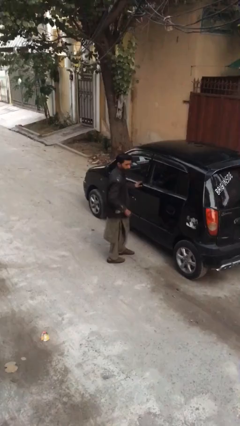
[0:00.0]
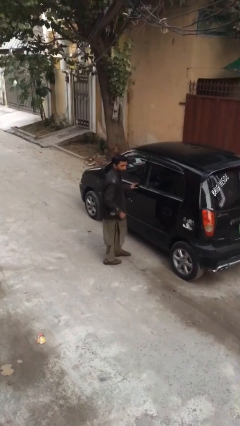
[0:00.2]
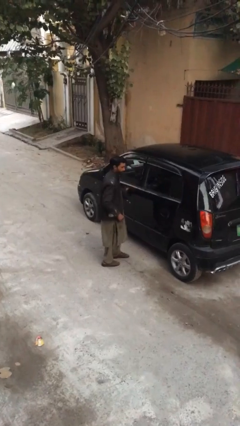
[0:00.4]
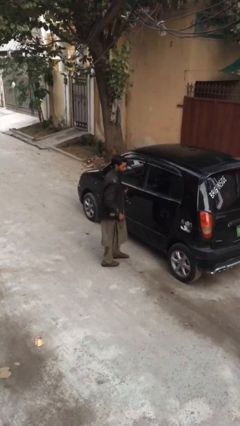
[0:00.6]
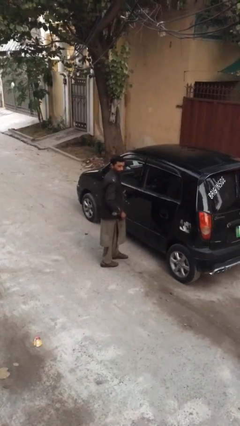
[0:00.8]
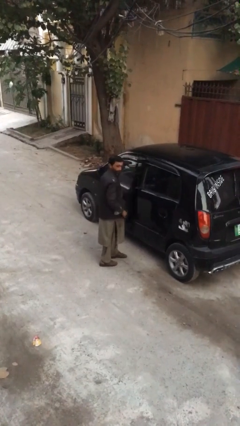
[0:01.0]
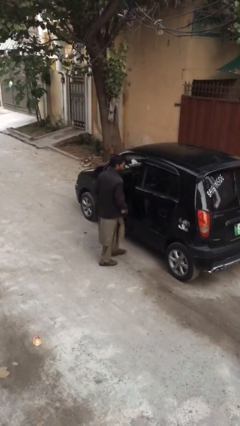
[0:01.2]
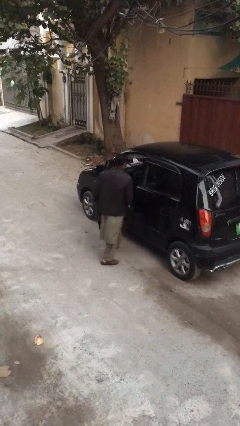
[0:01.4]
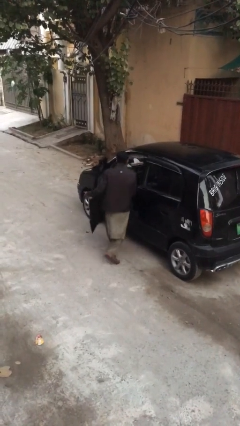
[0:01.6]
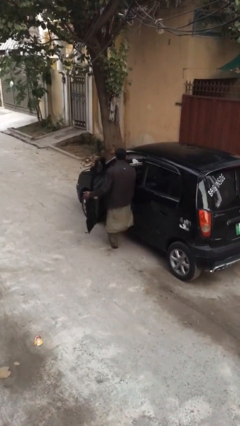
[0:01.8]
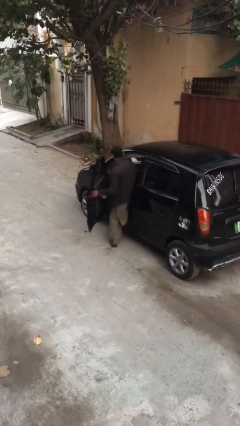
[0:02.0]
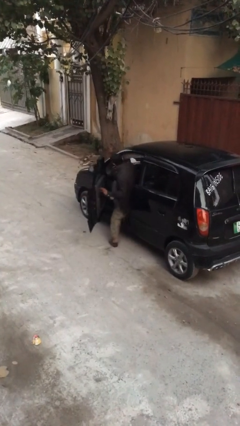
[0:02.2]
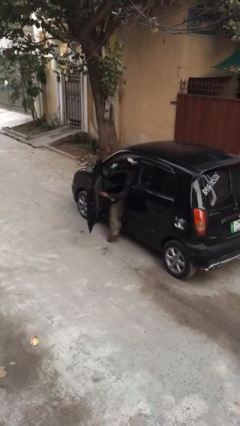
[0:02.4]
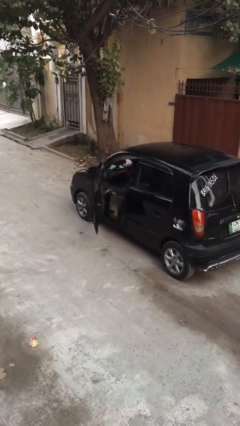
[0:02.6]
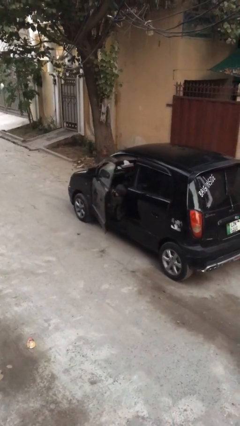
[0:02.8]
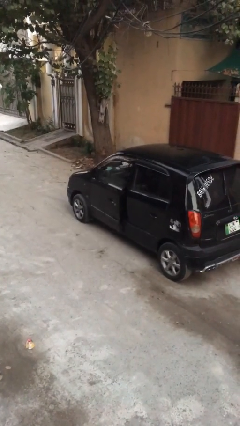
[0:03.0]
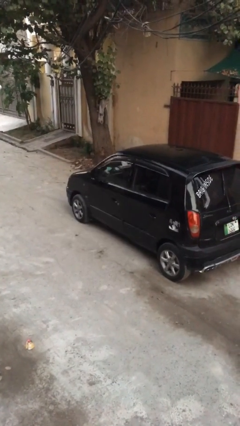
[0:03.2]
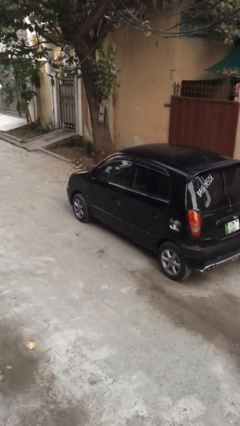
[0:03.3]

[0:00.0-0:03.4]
car picks up person

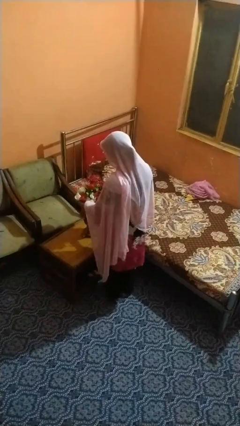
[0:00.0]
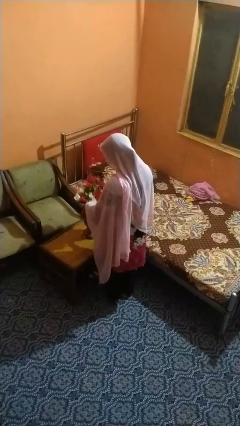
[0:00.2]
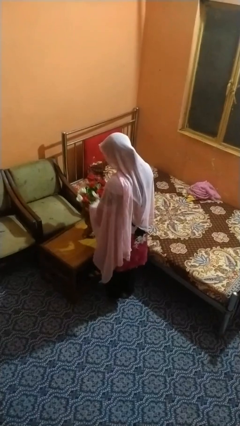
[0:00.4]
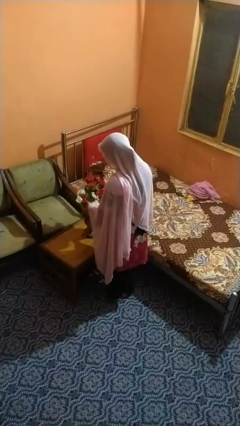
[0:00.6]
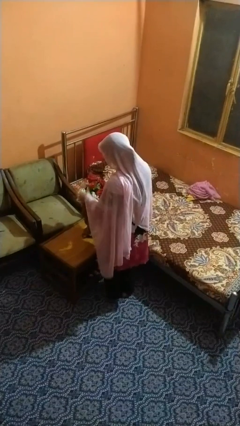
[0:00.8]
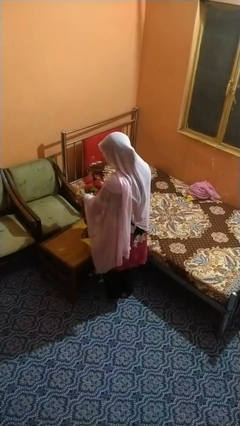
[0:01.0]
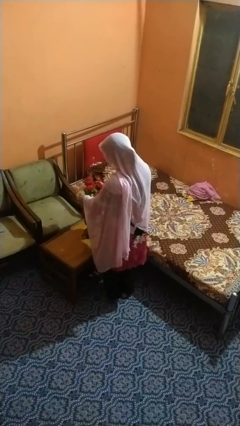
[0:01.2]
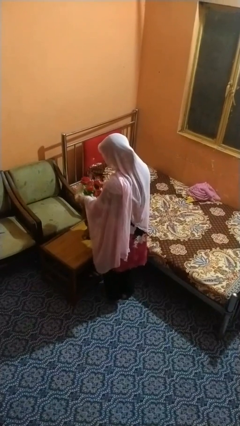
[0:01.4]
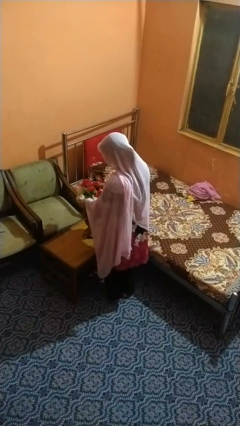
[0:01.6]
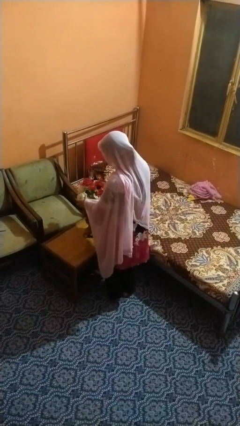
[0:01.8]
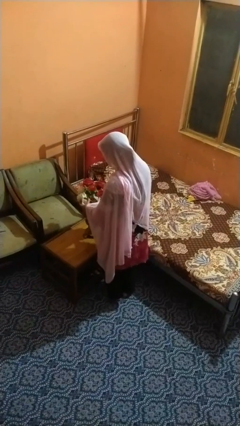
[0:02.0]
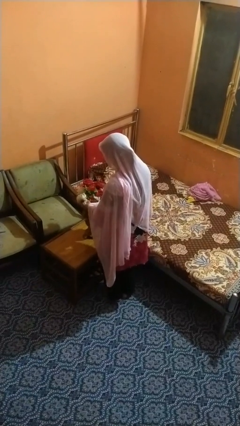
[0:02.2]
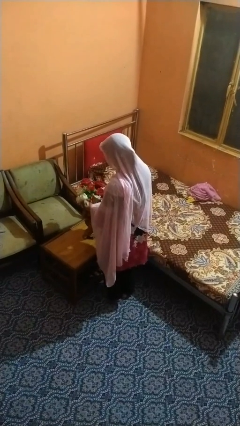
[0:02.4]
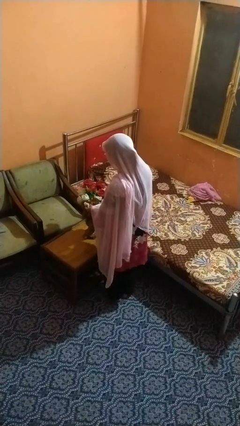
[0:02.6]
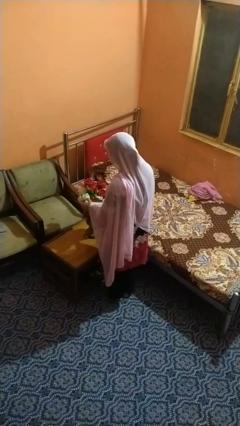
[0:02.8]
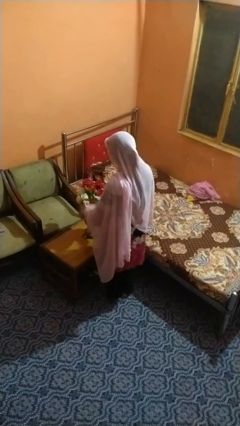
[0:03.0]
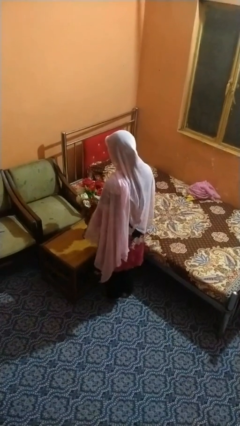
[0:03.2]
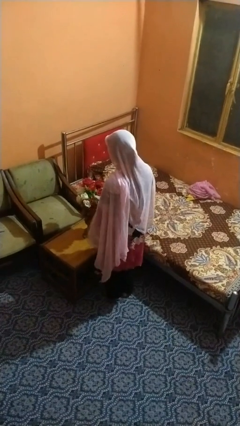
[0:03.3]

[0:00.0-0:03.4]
person arranges flowers in vase

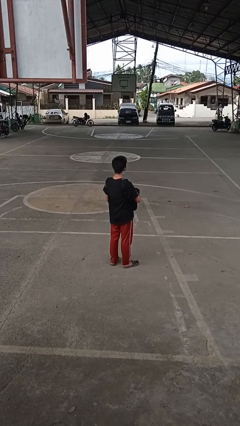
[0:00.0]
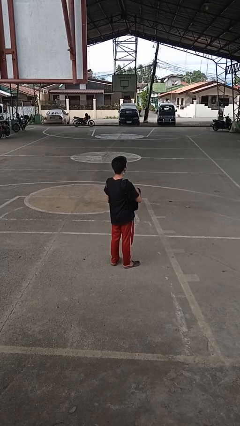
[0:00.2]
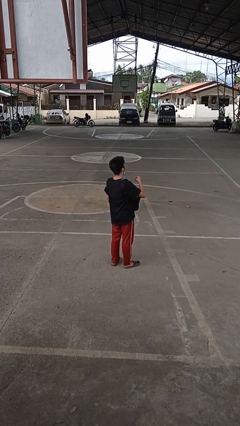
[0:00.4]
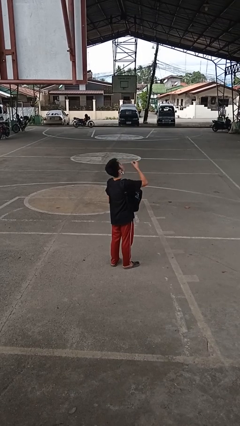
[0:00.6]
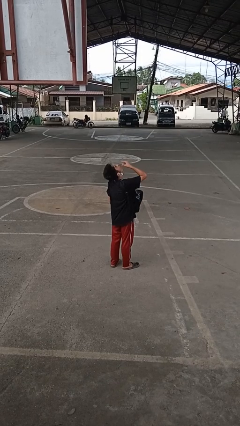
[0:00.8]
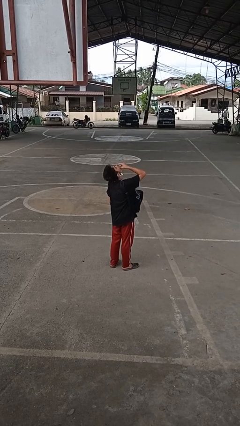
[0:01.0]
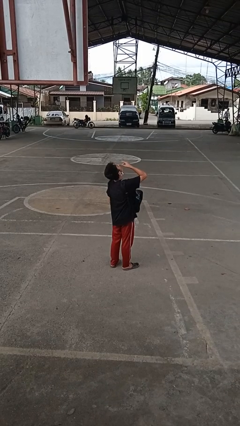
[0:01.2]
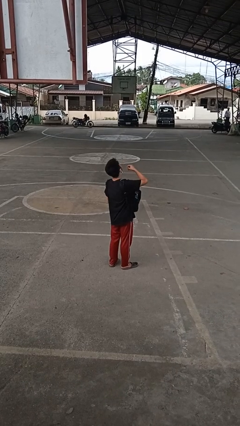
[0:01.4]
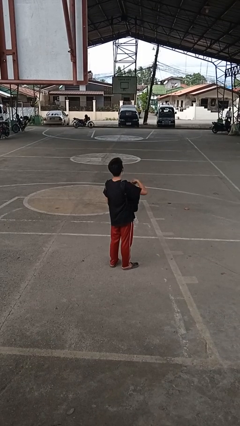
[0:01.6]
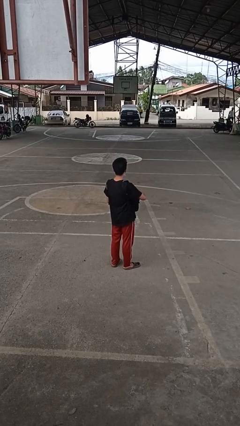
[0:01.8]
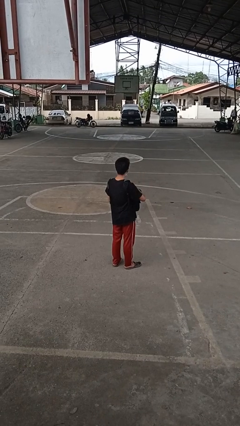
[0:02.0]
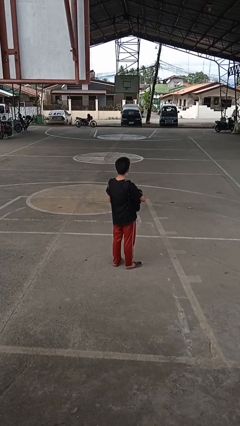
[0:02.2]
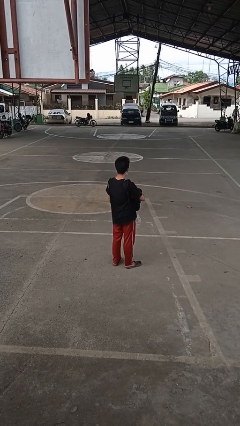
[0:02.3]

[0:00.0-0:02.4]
person eats snack from bag

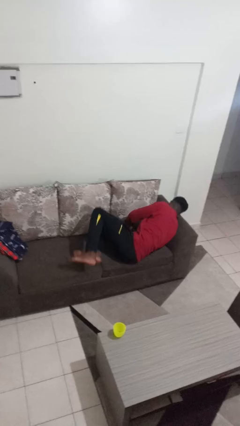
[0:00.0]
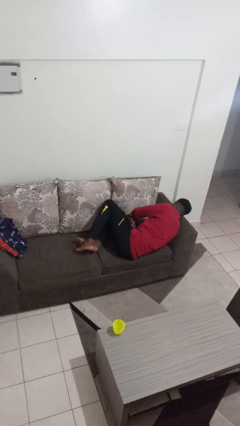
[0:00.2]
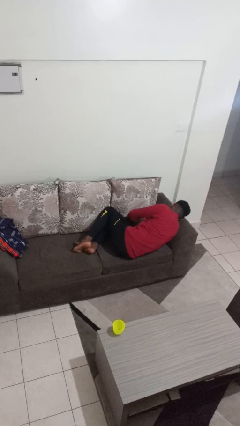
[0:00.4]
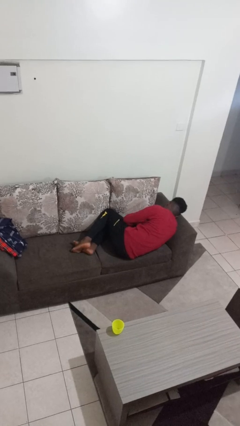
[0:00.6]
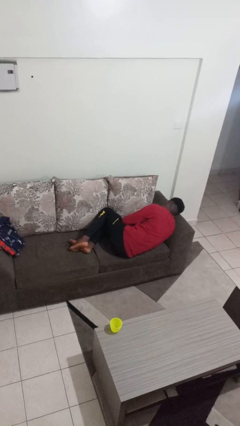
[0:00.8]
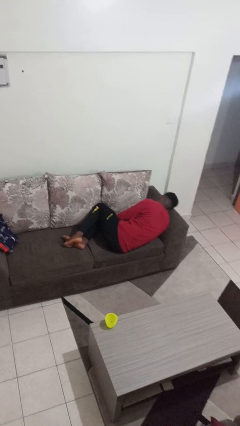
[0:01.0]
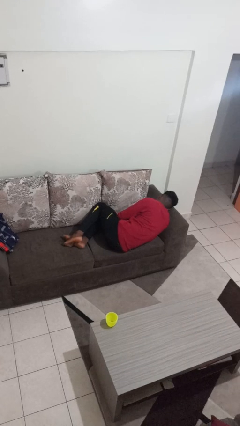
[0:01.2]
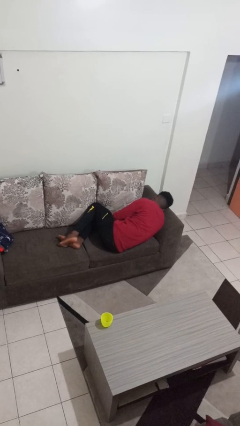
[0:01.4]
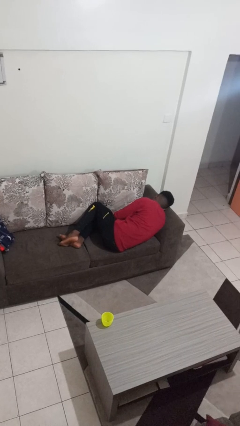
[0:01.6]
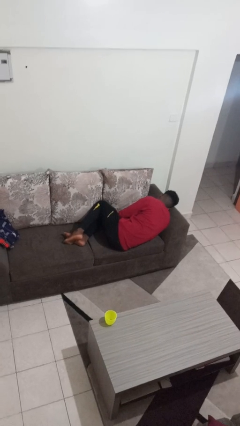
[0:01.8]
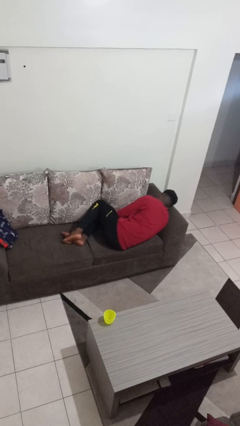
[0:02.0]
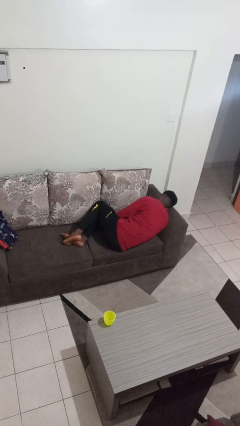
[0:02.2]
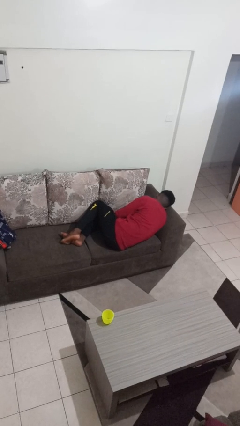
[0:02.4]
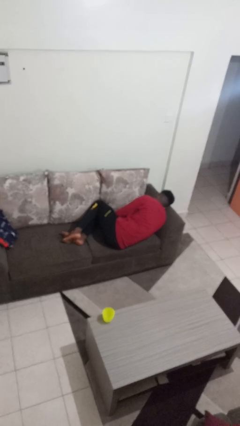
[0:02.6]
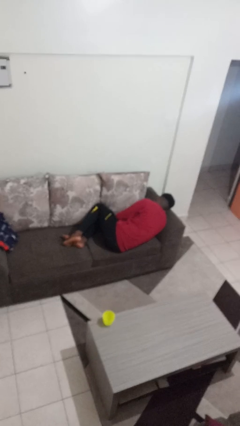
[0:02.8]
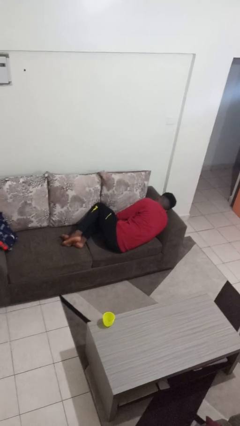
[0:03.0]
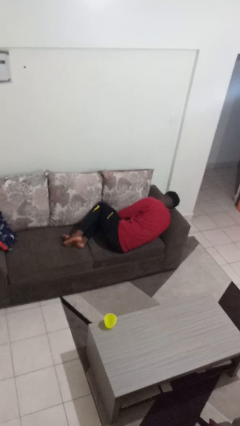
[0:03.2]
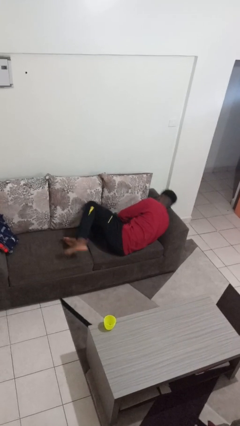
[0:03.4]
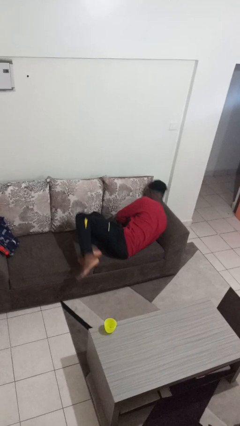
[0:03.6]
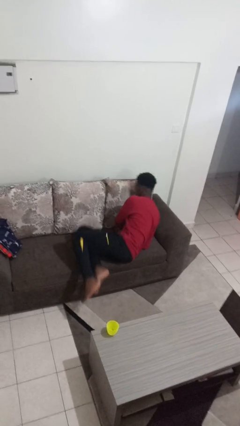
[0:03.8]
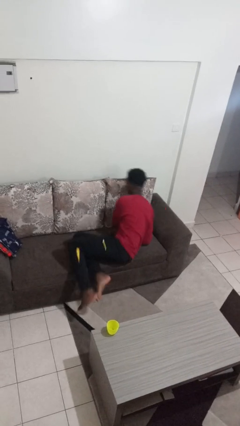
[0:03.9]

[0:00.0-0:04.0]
person lies down on couch

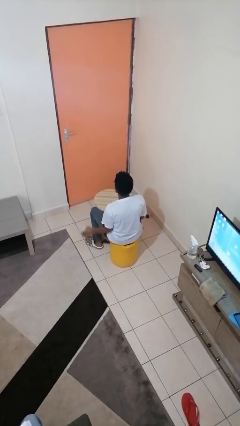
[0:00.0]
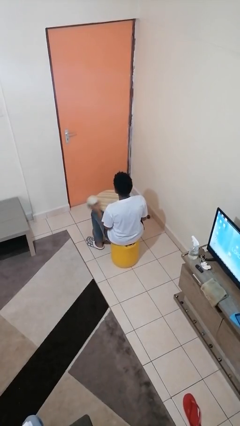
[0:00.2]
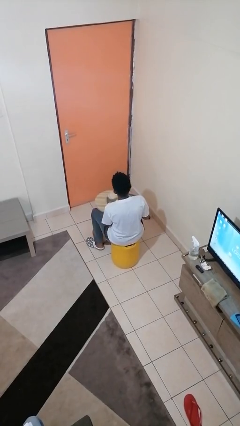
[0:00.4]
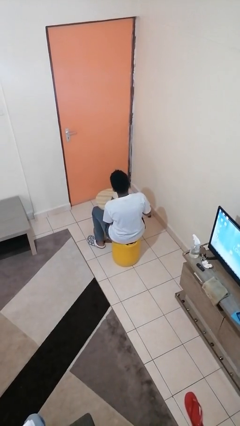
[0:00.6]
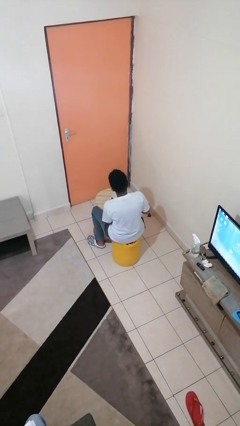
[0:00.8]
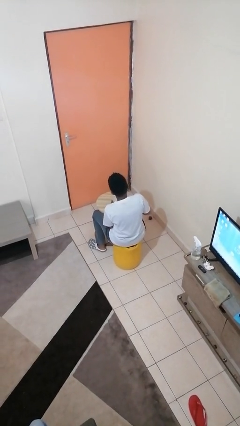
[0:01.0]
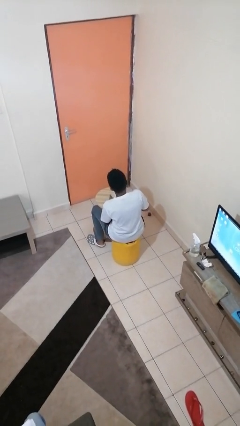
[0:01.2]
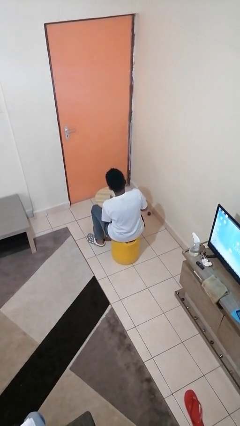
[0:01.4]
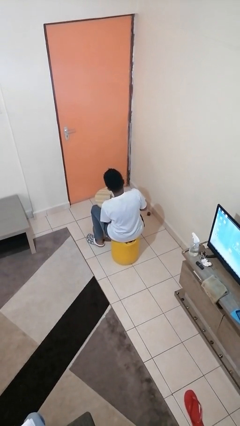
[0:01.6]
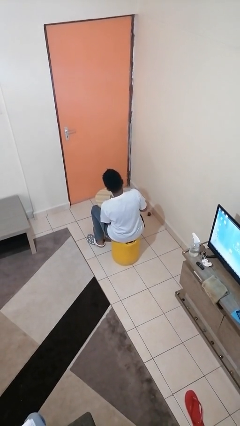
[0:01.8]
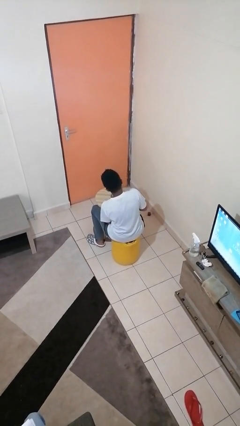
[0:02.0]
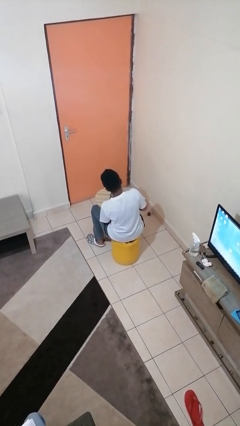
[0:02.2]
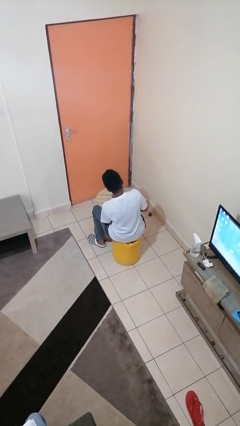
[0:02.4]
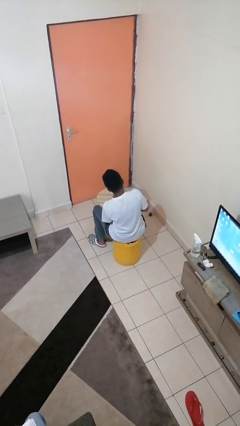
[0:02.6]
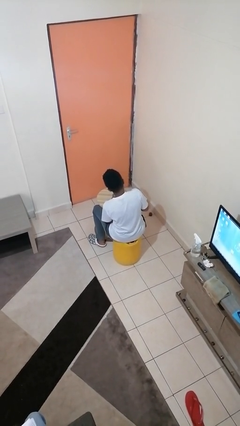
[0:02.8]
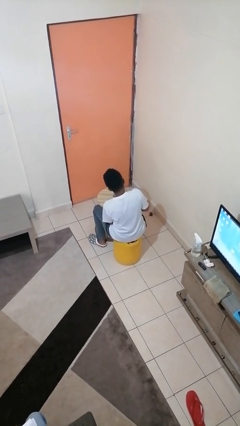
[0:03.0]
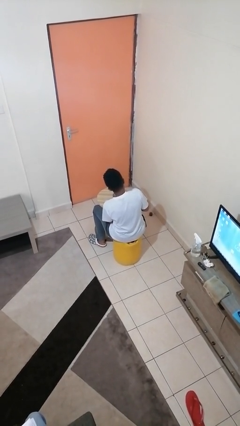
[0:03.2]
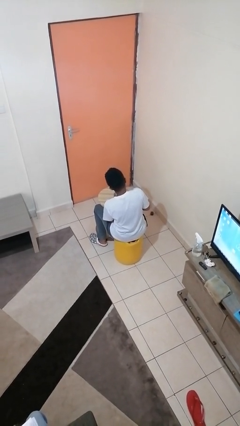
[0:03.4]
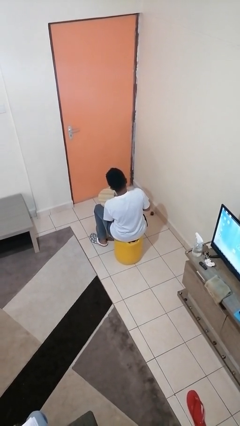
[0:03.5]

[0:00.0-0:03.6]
person opens can with can opener

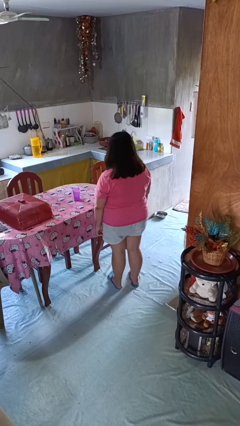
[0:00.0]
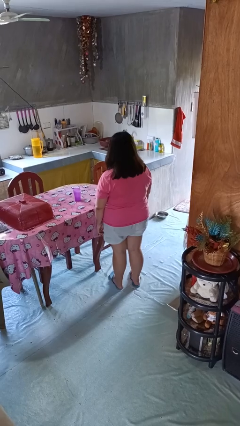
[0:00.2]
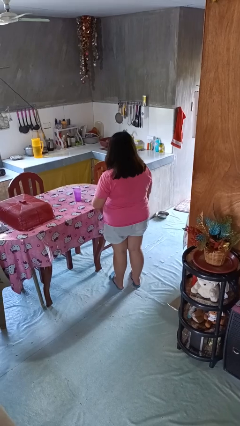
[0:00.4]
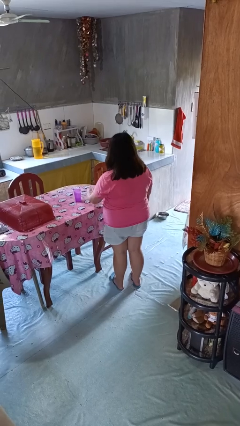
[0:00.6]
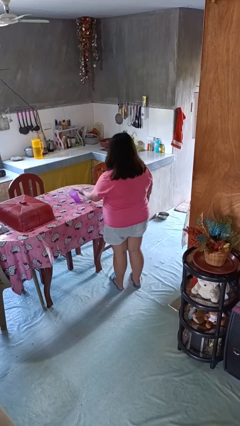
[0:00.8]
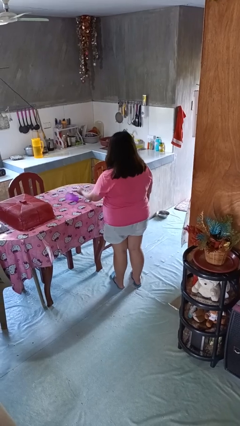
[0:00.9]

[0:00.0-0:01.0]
person knocks over glass
